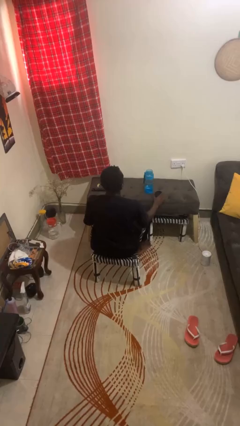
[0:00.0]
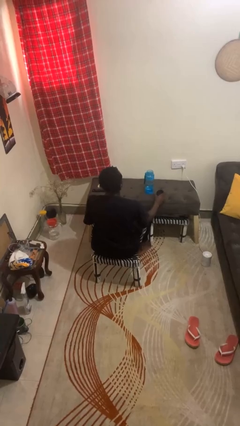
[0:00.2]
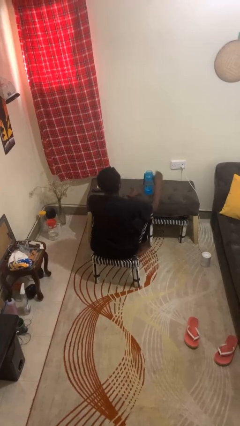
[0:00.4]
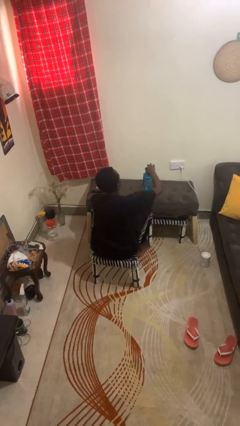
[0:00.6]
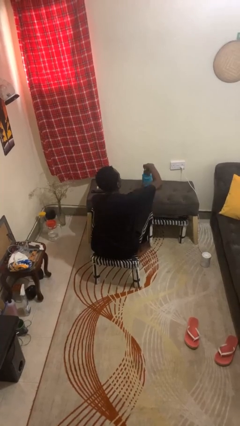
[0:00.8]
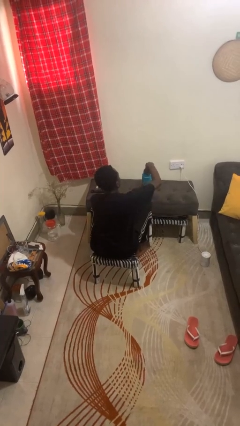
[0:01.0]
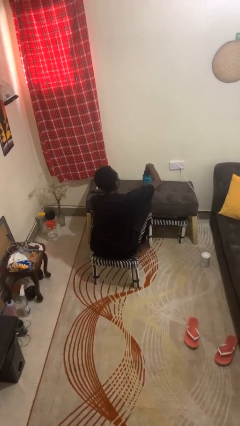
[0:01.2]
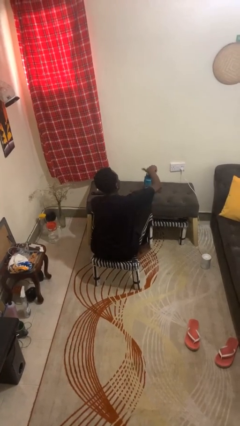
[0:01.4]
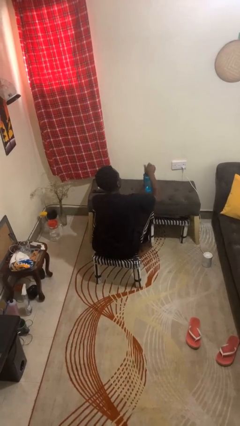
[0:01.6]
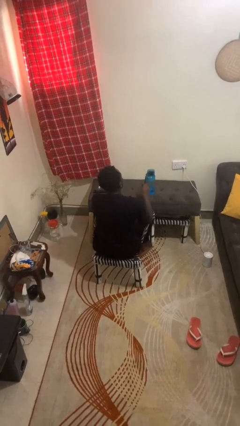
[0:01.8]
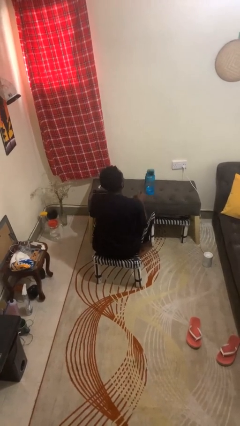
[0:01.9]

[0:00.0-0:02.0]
person closes jar

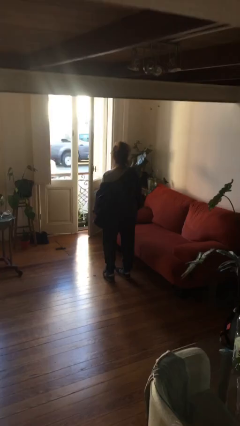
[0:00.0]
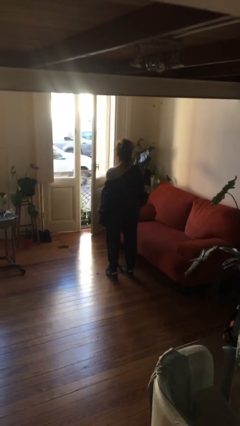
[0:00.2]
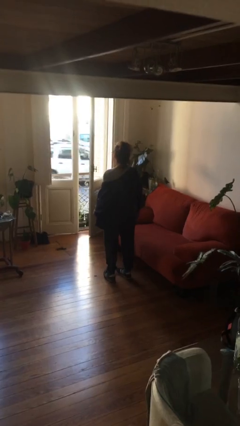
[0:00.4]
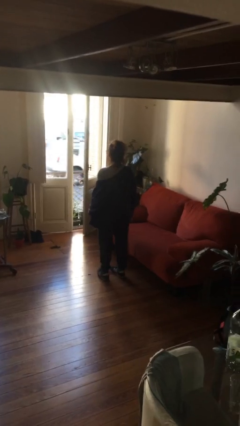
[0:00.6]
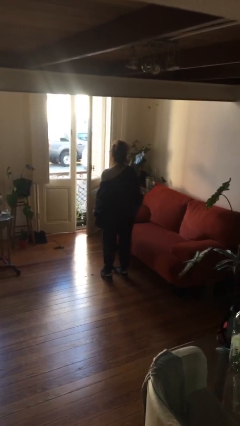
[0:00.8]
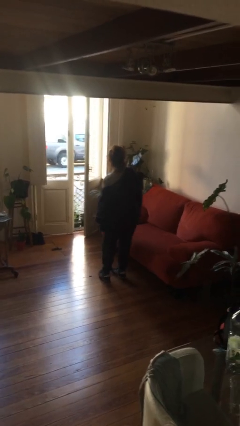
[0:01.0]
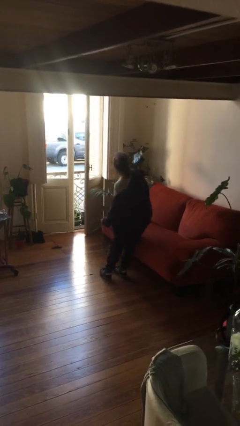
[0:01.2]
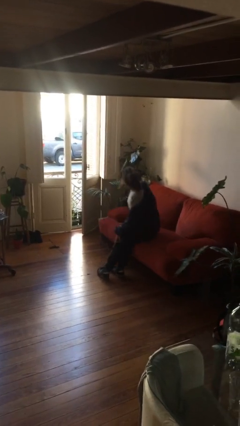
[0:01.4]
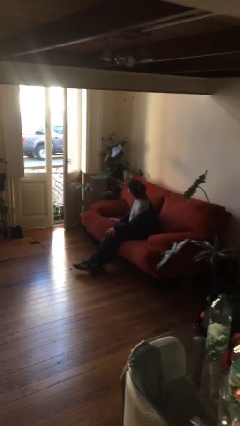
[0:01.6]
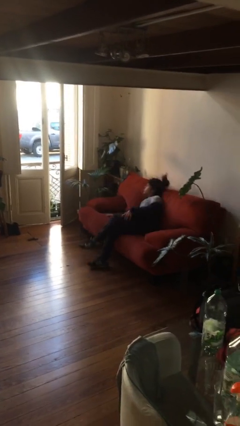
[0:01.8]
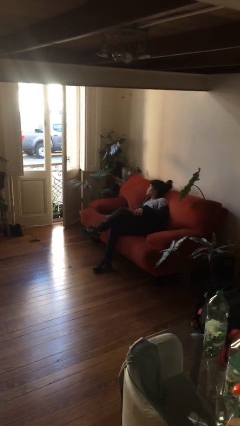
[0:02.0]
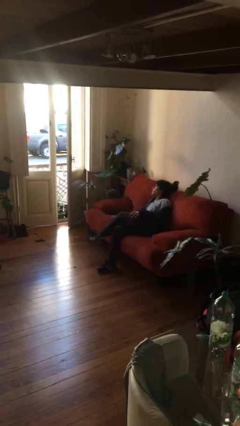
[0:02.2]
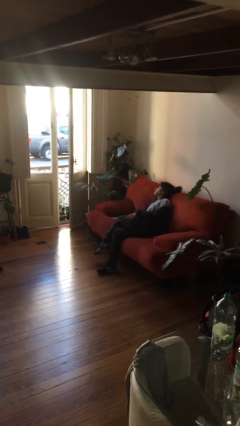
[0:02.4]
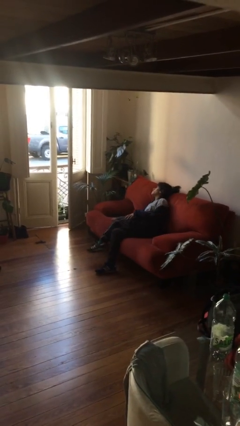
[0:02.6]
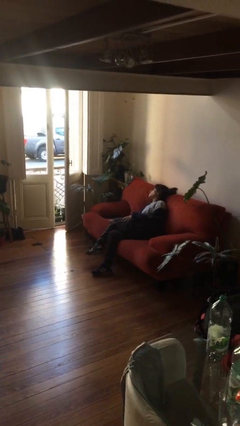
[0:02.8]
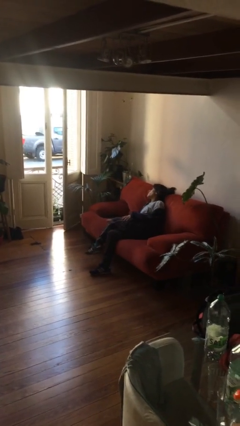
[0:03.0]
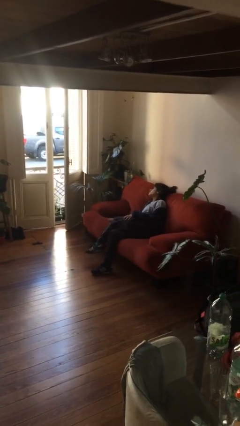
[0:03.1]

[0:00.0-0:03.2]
person lies down on couch

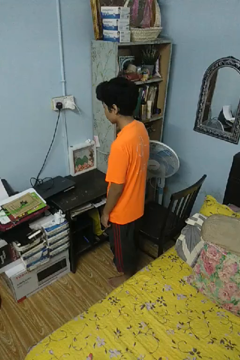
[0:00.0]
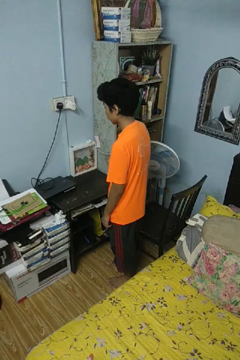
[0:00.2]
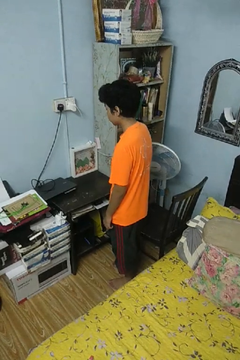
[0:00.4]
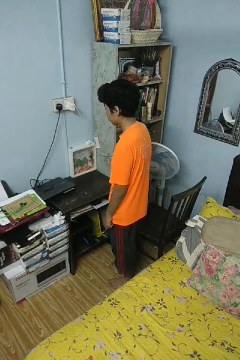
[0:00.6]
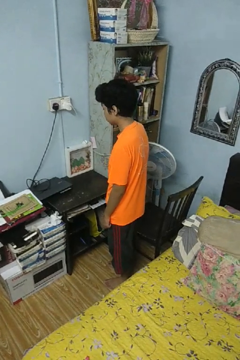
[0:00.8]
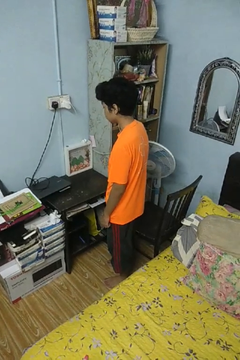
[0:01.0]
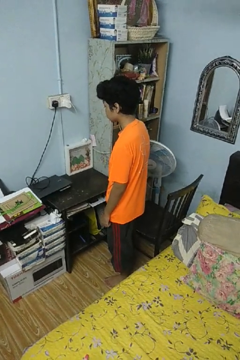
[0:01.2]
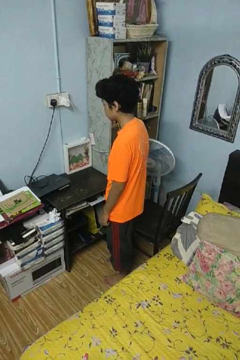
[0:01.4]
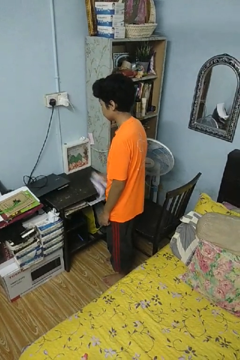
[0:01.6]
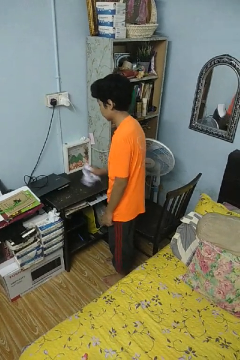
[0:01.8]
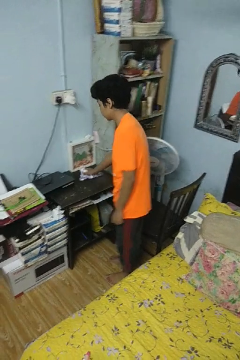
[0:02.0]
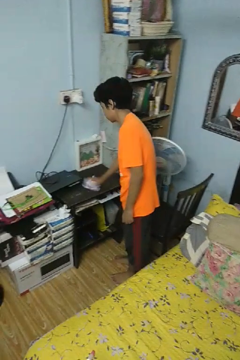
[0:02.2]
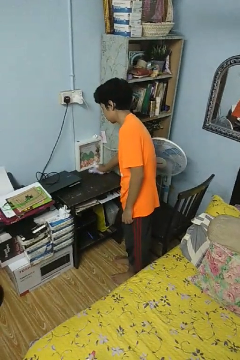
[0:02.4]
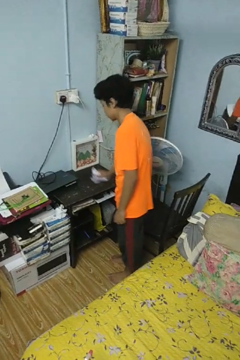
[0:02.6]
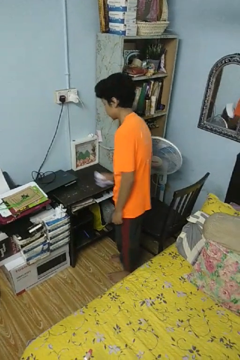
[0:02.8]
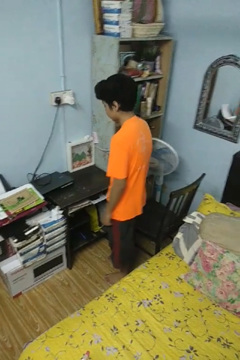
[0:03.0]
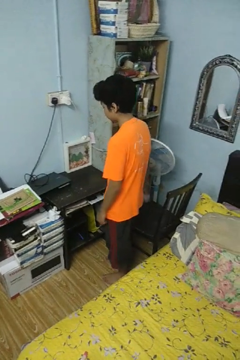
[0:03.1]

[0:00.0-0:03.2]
person cleans table with rag

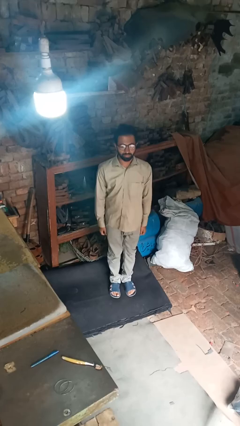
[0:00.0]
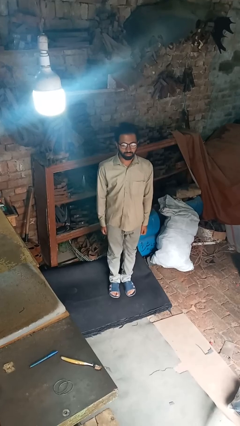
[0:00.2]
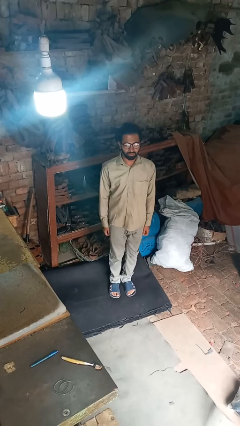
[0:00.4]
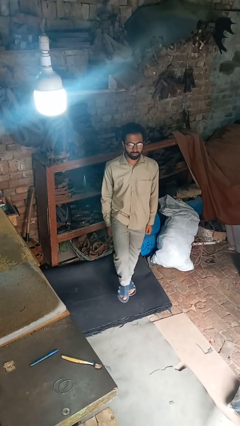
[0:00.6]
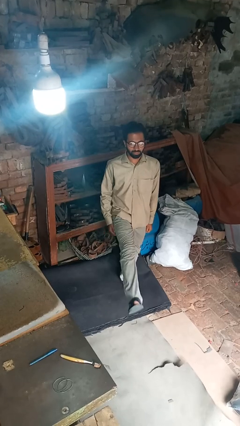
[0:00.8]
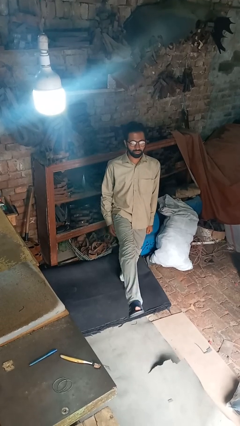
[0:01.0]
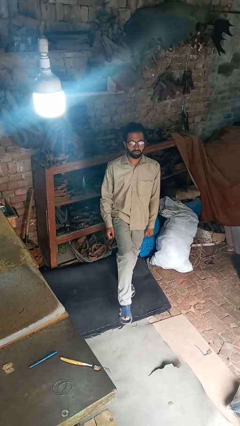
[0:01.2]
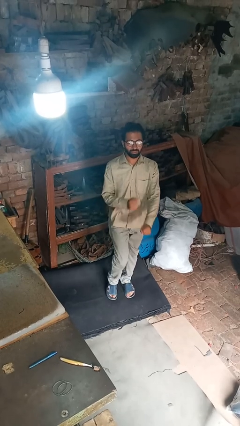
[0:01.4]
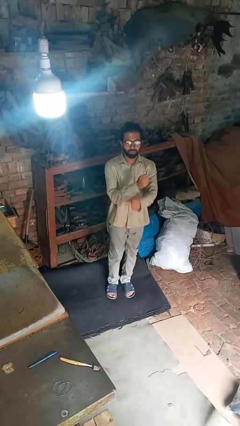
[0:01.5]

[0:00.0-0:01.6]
person karate kicks

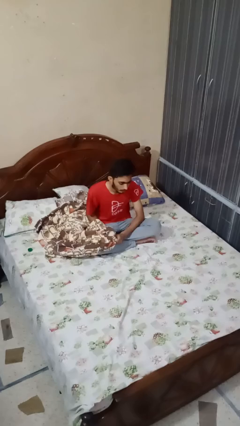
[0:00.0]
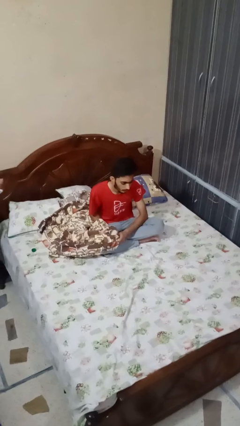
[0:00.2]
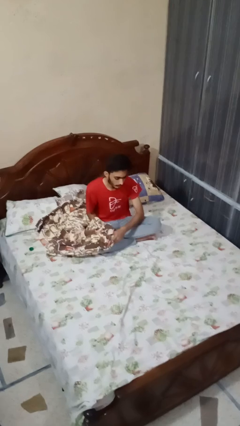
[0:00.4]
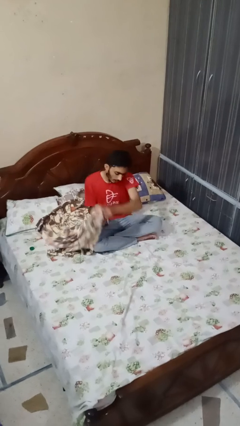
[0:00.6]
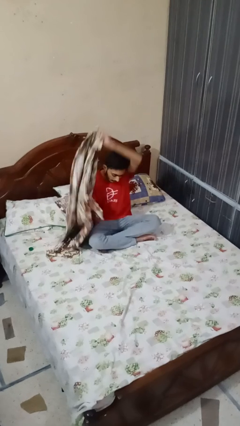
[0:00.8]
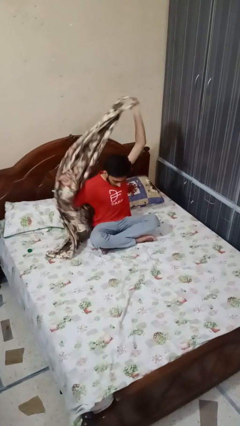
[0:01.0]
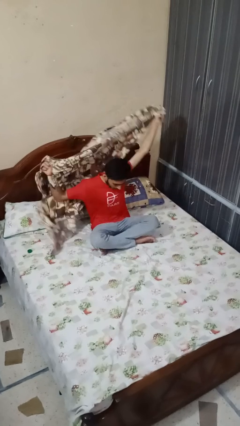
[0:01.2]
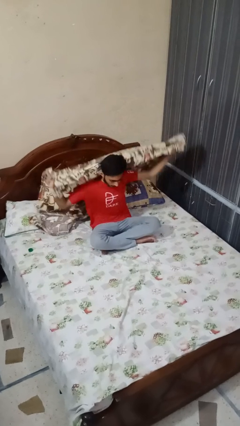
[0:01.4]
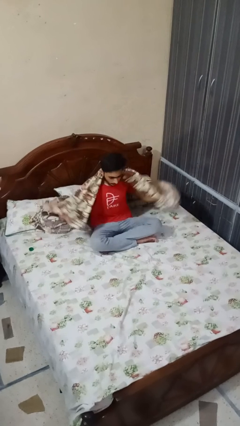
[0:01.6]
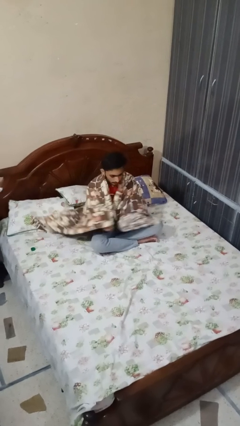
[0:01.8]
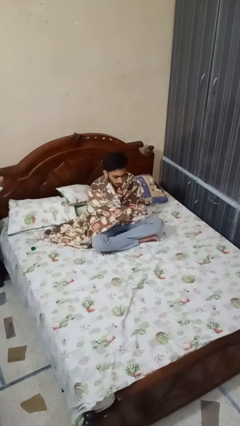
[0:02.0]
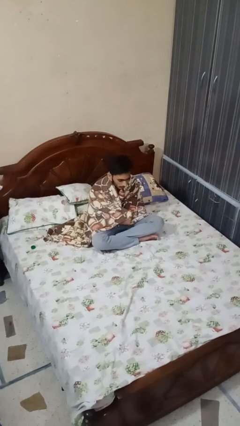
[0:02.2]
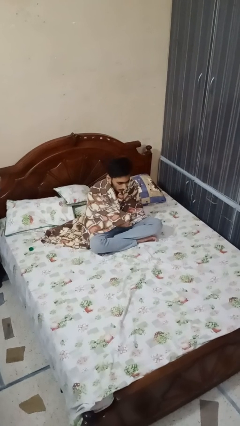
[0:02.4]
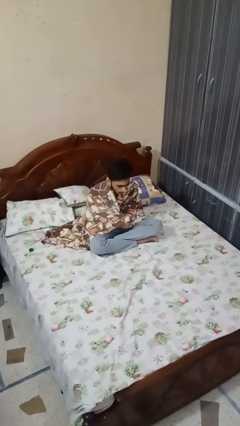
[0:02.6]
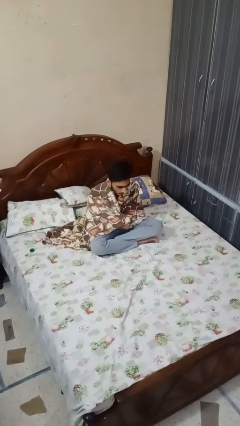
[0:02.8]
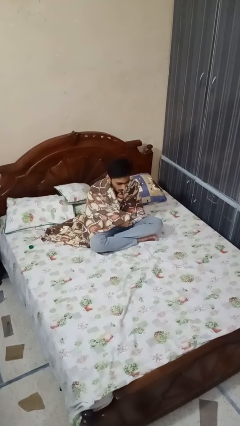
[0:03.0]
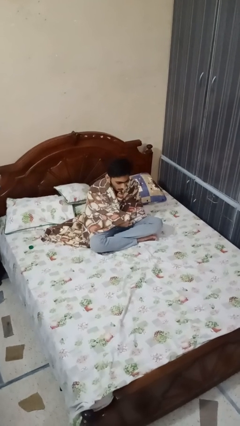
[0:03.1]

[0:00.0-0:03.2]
person covers with blanket

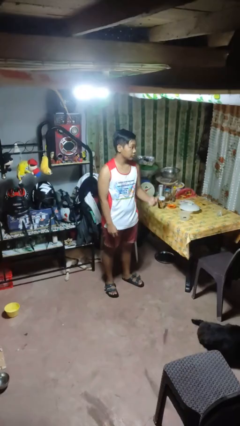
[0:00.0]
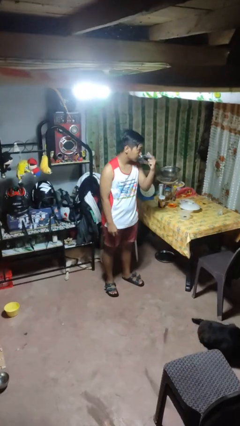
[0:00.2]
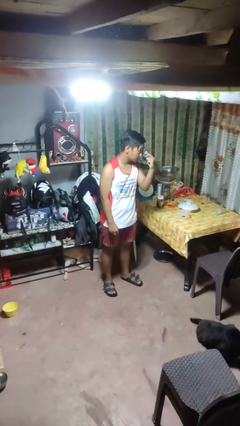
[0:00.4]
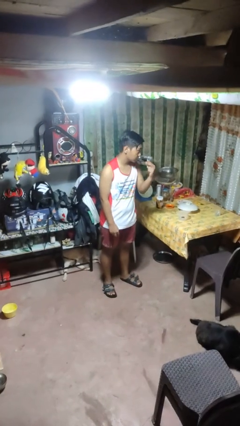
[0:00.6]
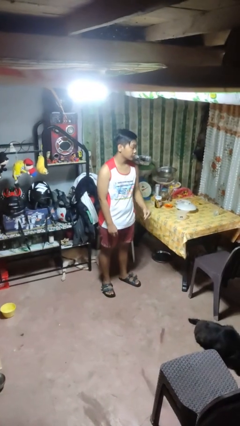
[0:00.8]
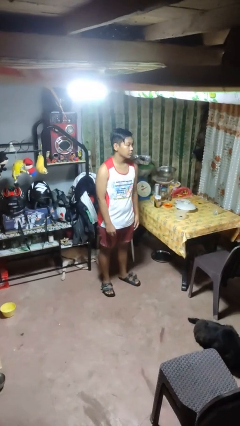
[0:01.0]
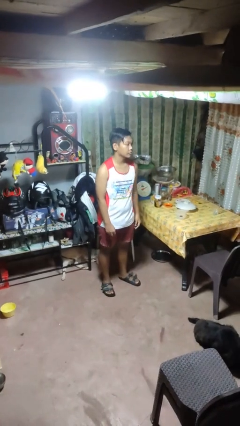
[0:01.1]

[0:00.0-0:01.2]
person gestures watch closely

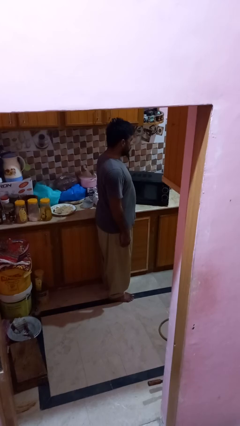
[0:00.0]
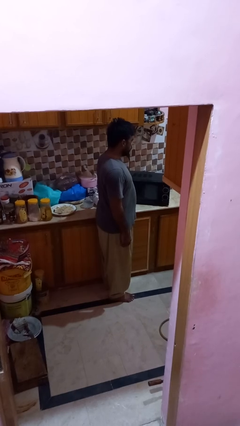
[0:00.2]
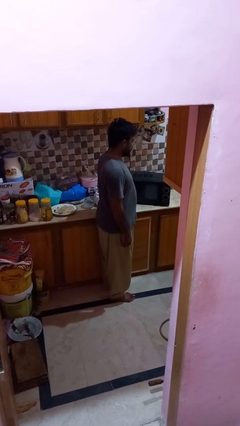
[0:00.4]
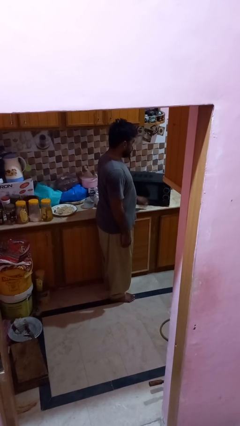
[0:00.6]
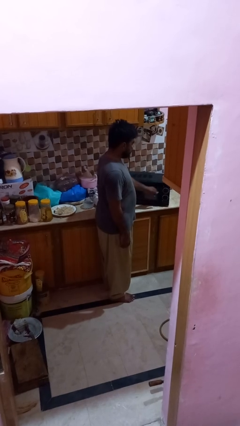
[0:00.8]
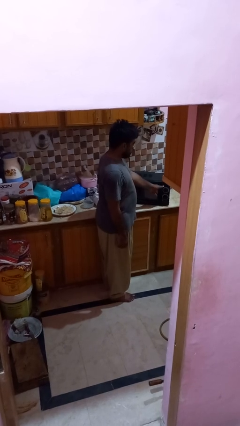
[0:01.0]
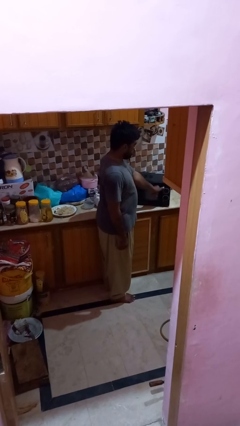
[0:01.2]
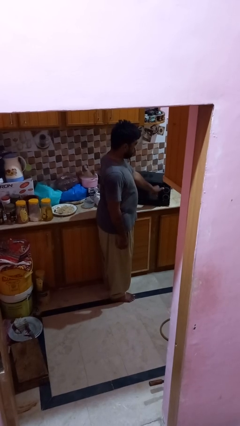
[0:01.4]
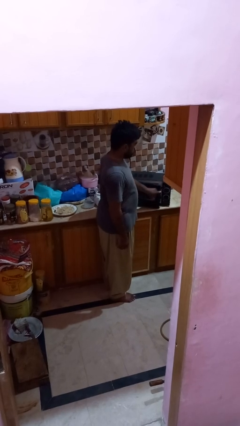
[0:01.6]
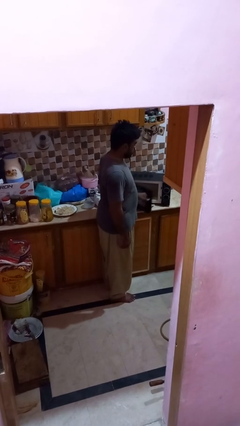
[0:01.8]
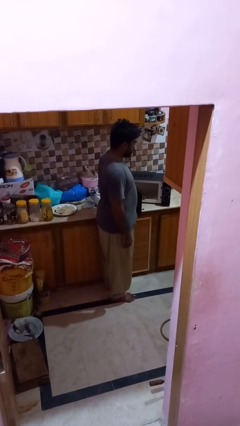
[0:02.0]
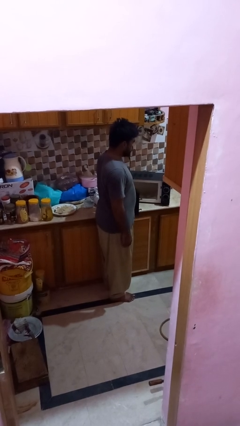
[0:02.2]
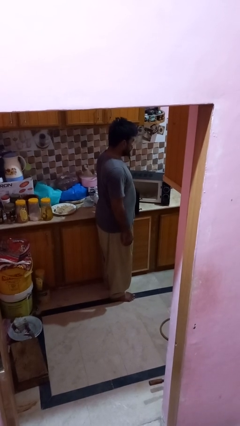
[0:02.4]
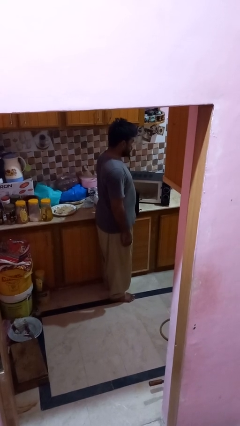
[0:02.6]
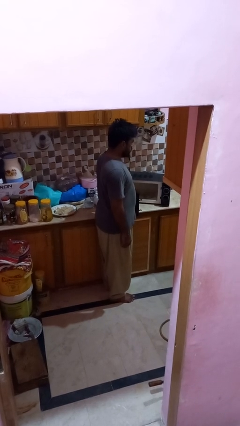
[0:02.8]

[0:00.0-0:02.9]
person opens microwave
